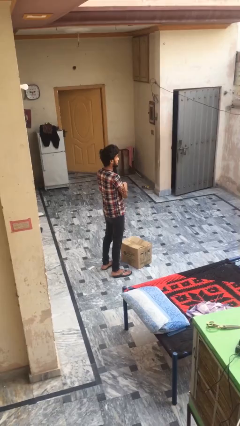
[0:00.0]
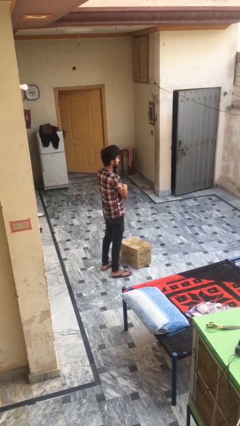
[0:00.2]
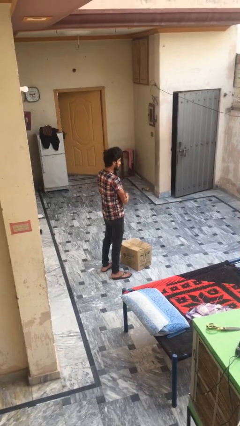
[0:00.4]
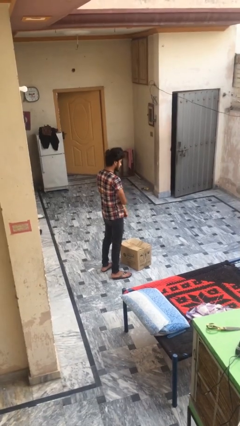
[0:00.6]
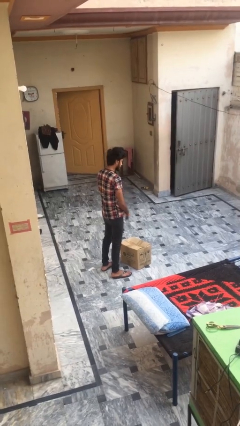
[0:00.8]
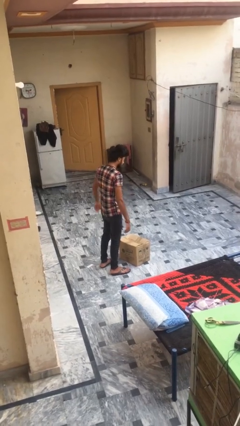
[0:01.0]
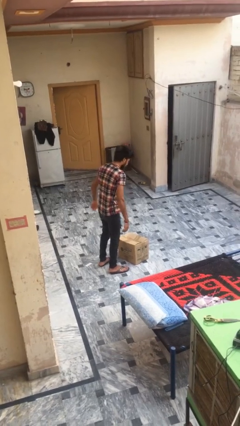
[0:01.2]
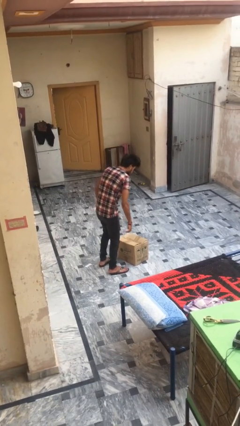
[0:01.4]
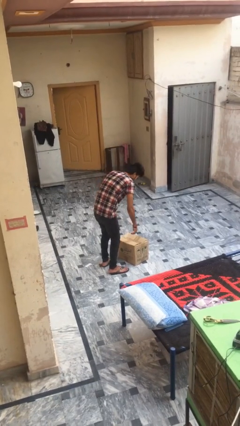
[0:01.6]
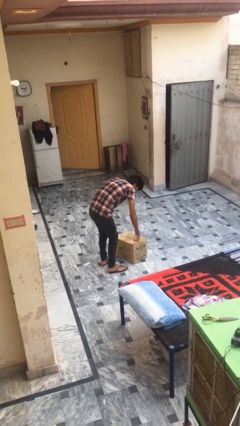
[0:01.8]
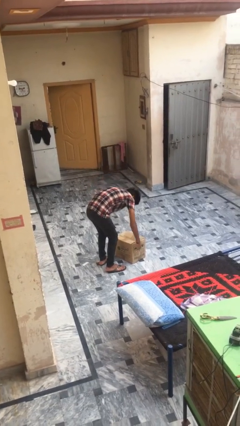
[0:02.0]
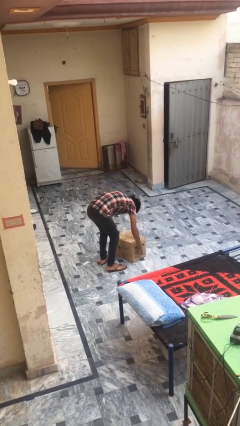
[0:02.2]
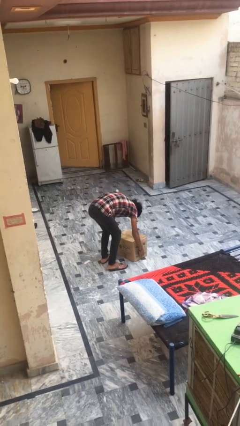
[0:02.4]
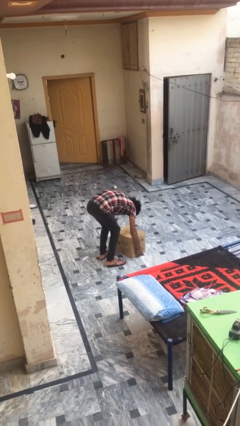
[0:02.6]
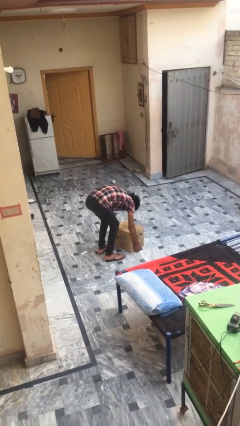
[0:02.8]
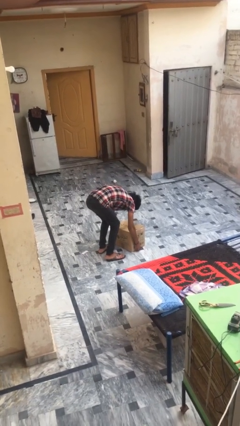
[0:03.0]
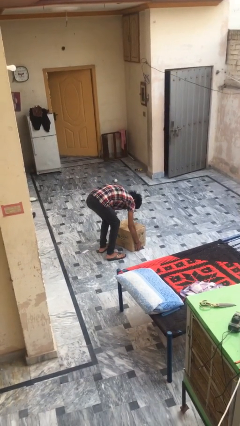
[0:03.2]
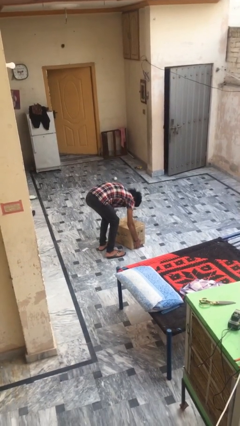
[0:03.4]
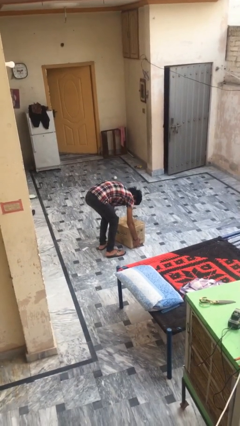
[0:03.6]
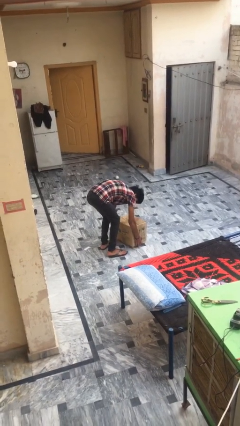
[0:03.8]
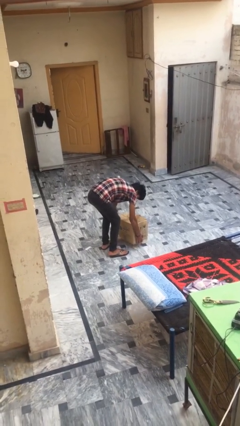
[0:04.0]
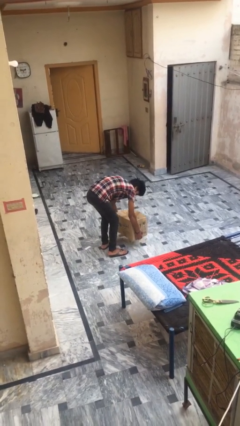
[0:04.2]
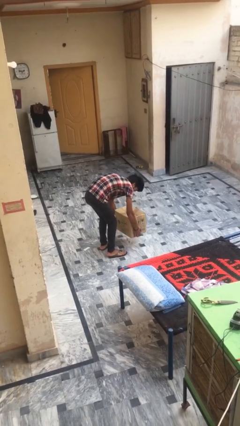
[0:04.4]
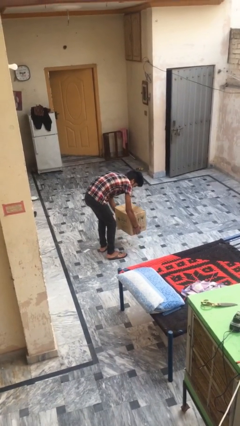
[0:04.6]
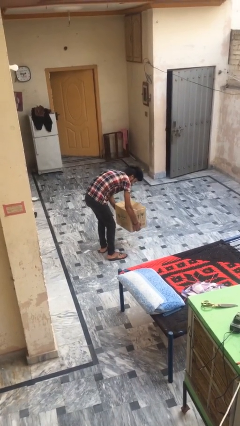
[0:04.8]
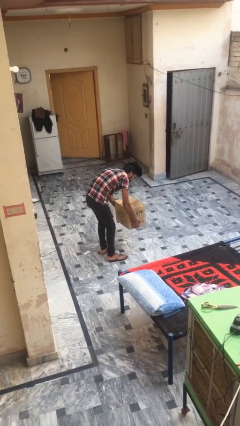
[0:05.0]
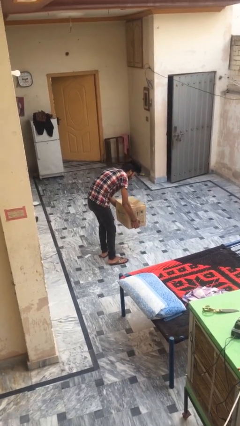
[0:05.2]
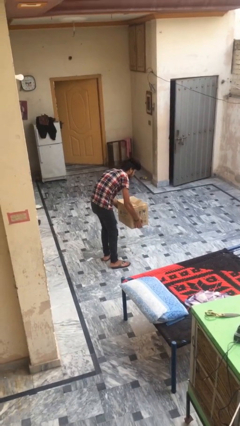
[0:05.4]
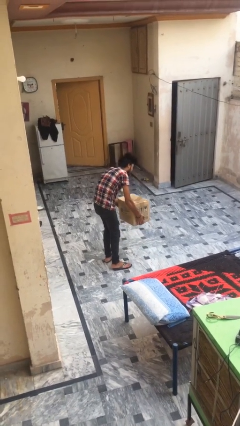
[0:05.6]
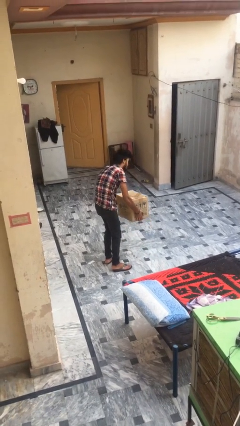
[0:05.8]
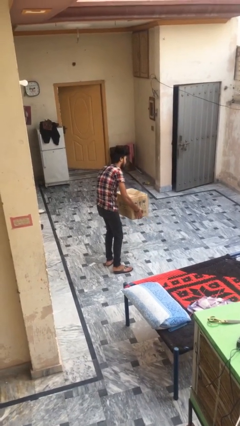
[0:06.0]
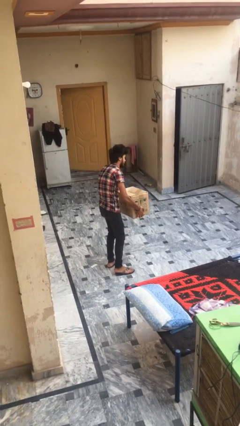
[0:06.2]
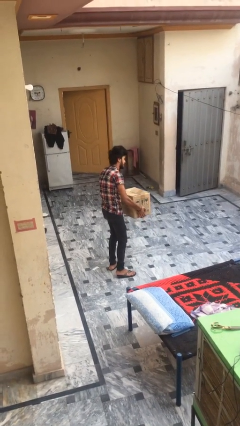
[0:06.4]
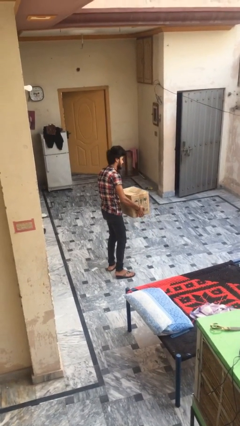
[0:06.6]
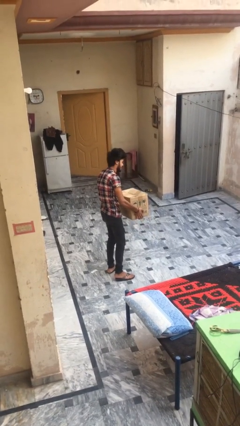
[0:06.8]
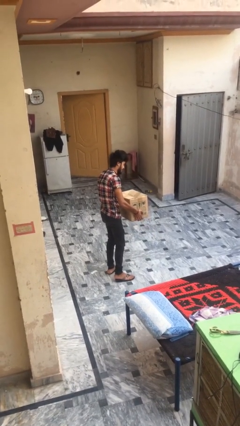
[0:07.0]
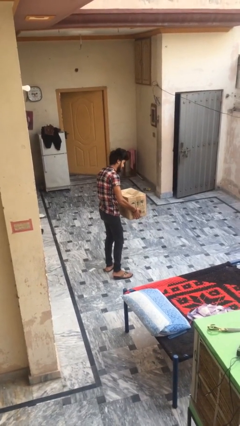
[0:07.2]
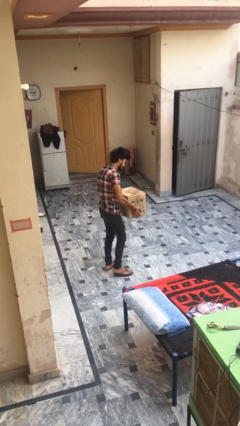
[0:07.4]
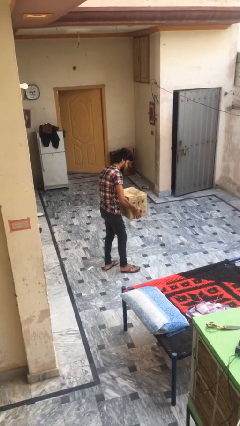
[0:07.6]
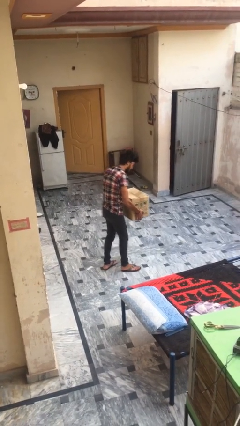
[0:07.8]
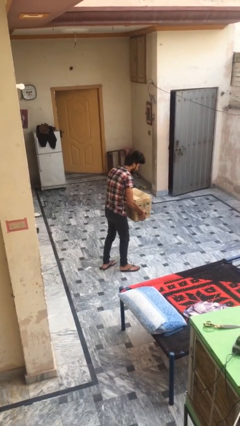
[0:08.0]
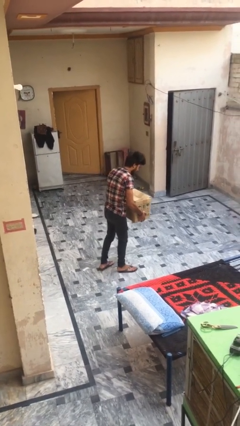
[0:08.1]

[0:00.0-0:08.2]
person picks up object from floor

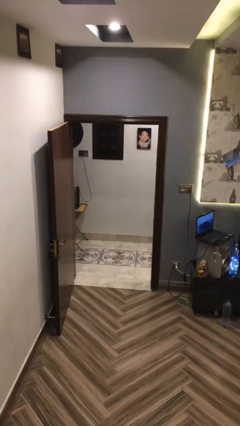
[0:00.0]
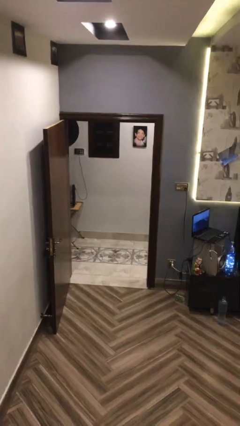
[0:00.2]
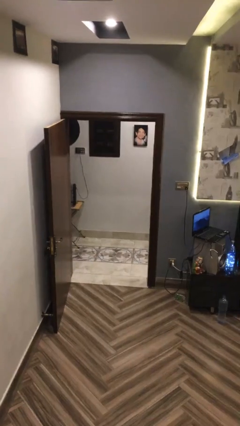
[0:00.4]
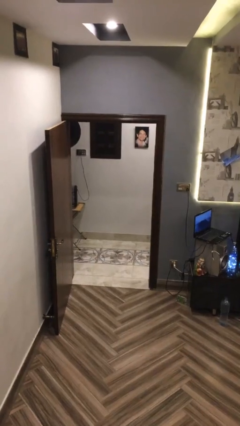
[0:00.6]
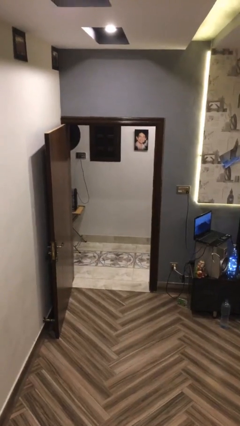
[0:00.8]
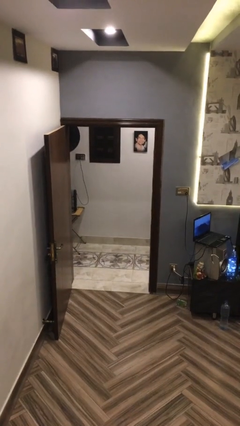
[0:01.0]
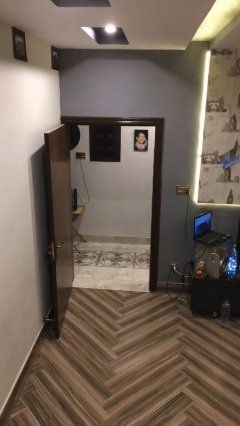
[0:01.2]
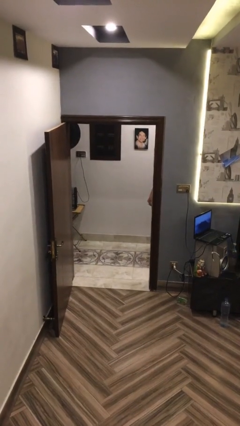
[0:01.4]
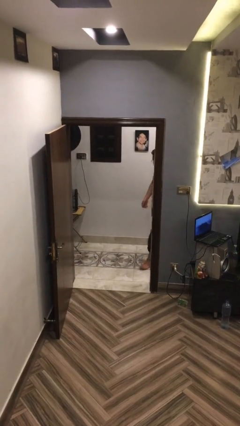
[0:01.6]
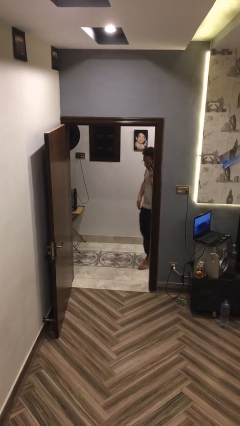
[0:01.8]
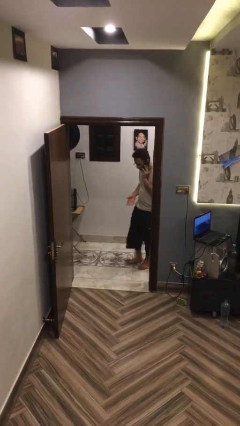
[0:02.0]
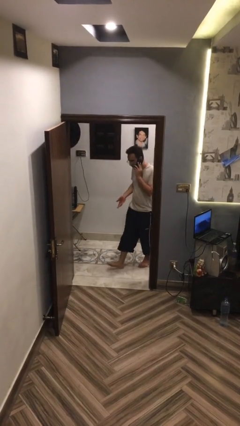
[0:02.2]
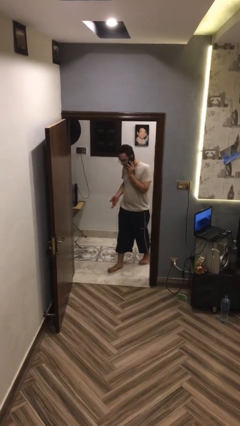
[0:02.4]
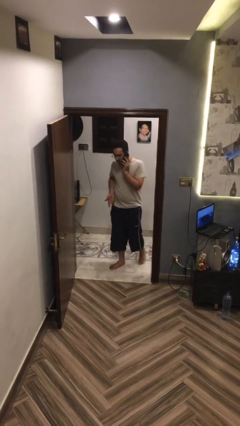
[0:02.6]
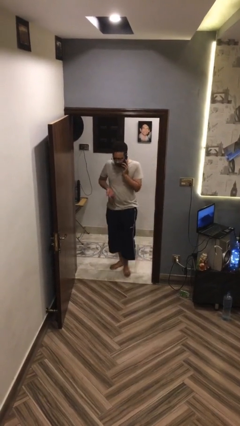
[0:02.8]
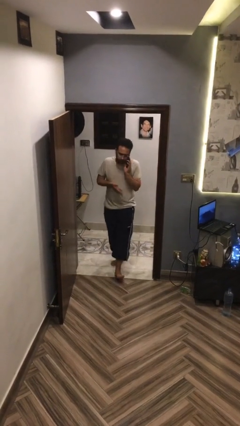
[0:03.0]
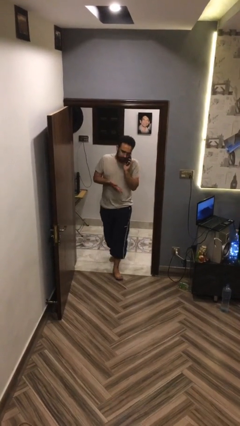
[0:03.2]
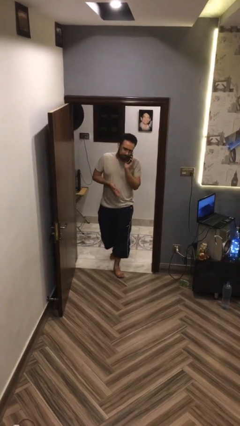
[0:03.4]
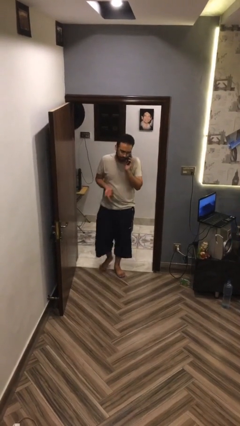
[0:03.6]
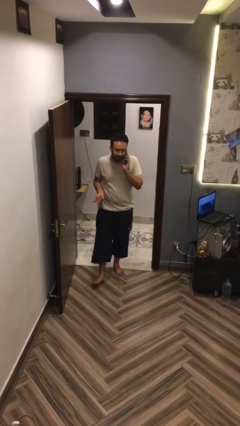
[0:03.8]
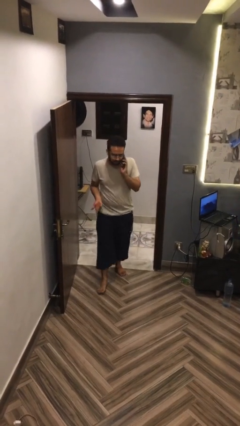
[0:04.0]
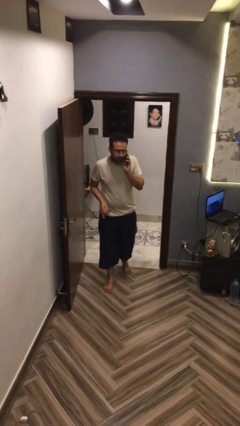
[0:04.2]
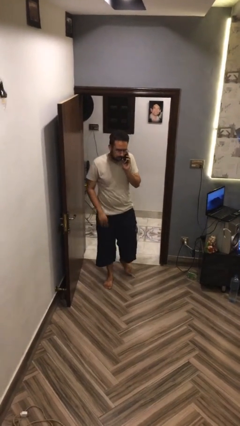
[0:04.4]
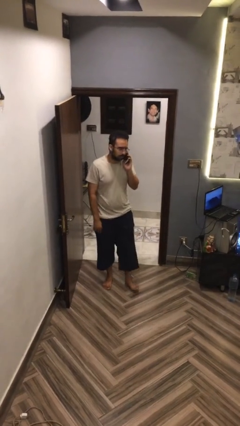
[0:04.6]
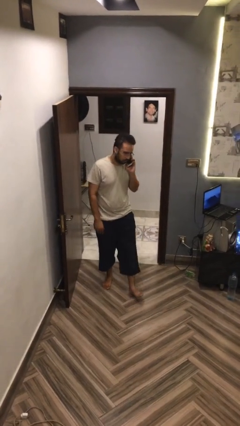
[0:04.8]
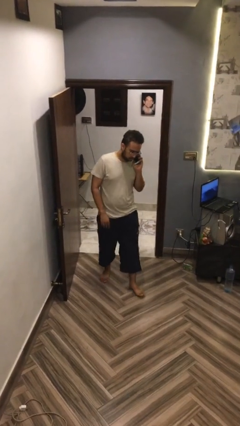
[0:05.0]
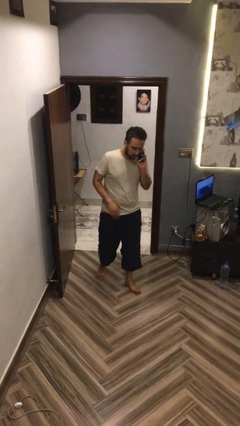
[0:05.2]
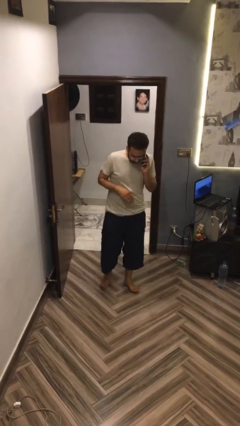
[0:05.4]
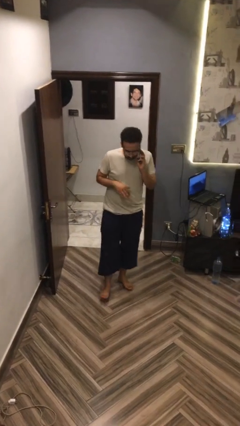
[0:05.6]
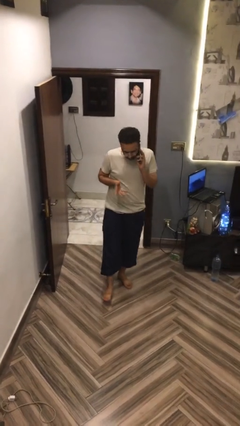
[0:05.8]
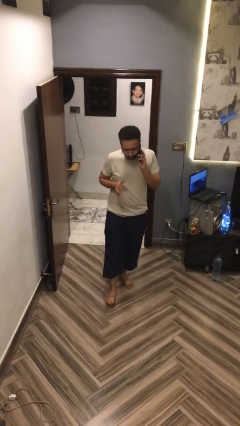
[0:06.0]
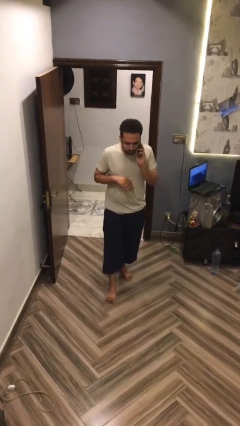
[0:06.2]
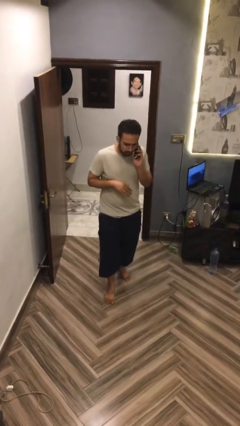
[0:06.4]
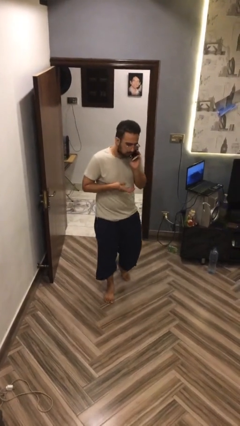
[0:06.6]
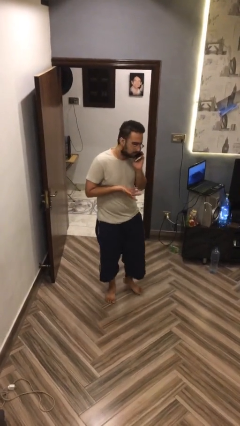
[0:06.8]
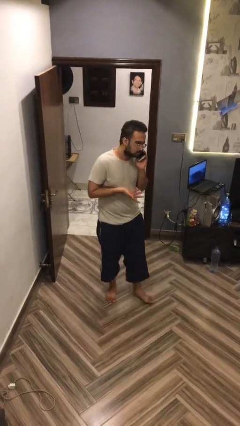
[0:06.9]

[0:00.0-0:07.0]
person enters scene through structure

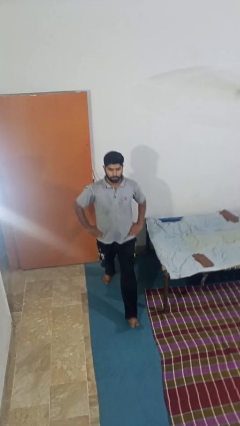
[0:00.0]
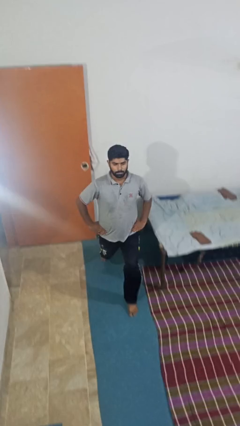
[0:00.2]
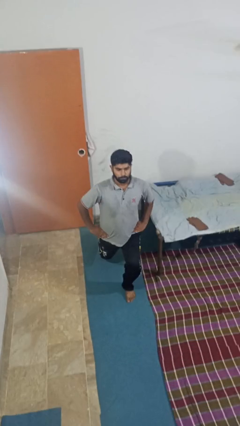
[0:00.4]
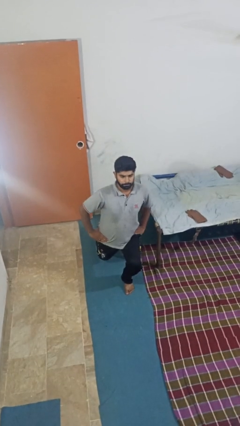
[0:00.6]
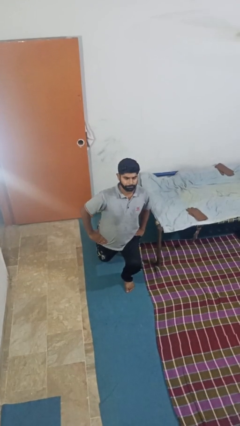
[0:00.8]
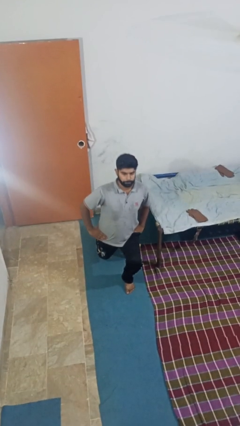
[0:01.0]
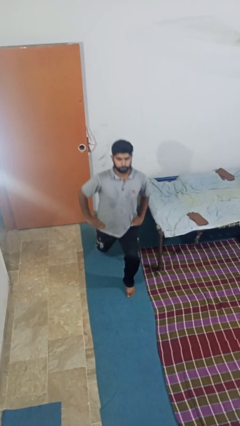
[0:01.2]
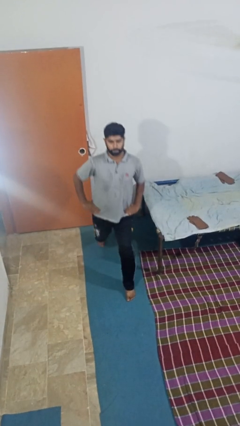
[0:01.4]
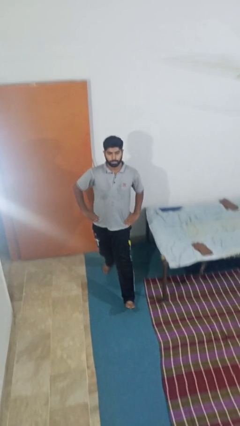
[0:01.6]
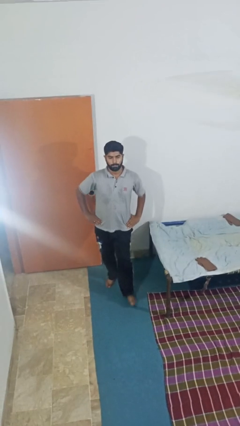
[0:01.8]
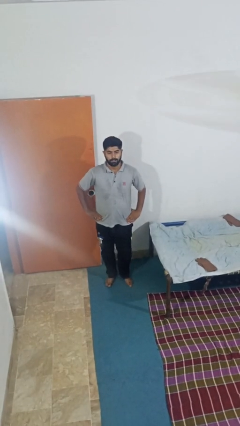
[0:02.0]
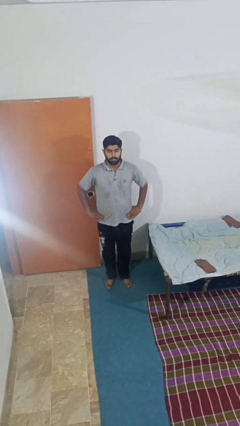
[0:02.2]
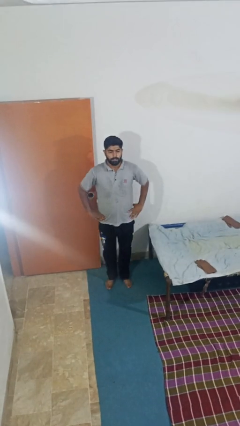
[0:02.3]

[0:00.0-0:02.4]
person exercises with lunges
